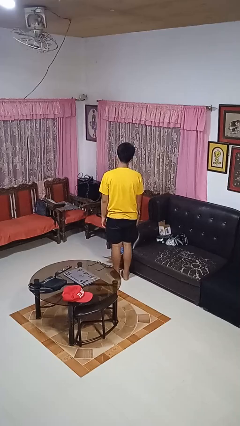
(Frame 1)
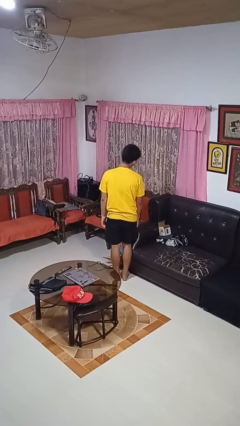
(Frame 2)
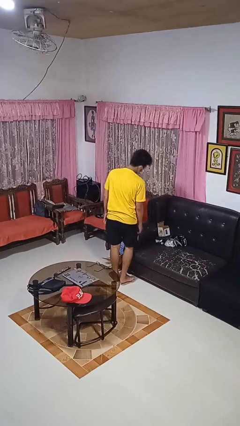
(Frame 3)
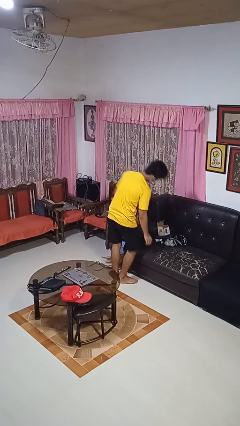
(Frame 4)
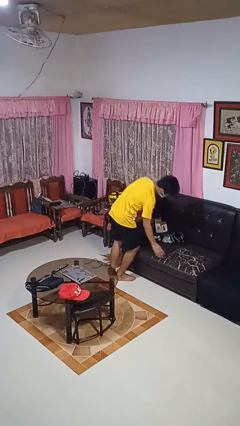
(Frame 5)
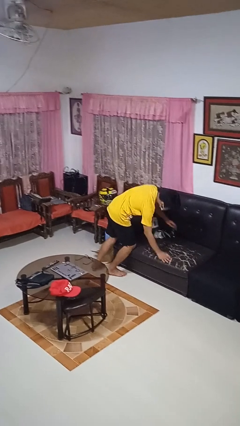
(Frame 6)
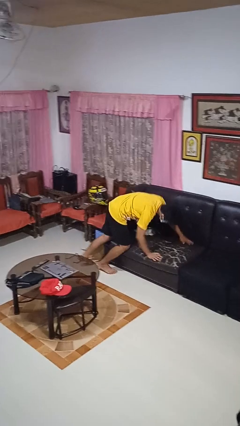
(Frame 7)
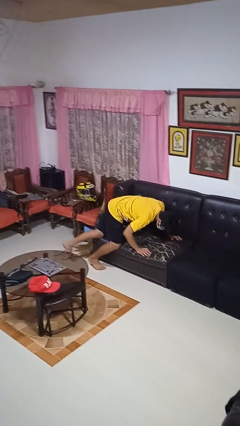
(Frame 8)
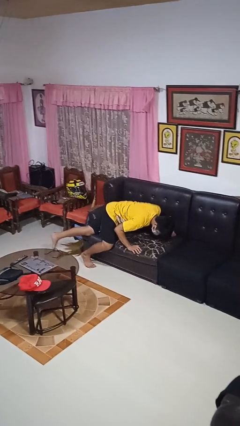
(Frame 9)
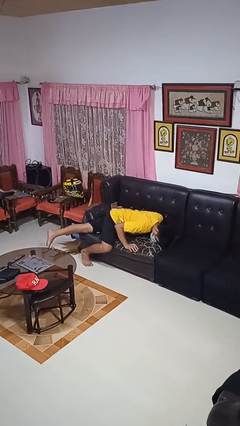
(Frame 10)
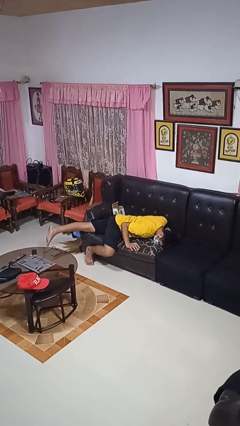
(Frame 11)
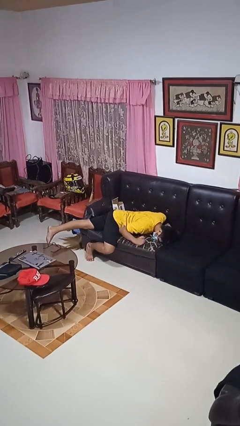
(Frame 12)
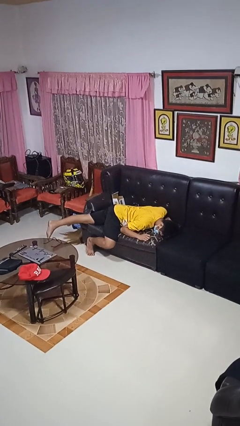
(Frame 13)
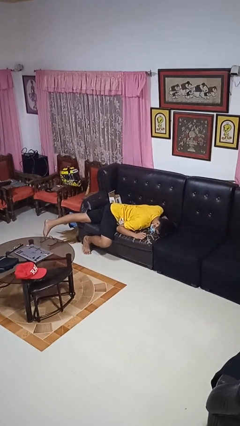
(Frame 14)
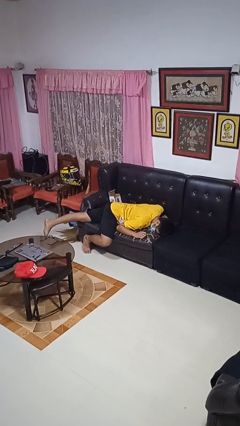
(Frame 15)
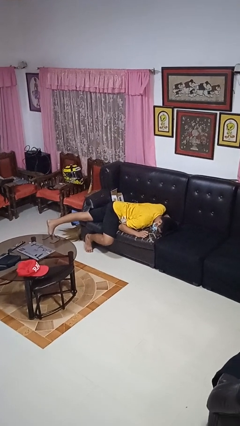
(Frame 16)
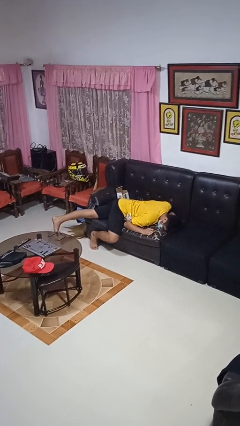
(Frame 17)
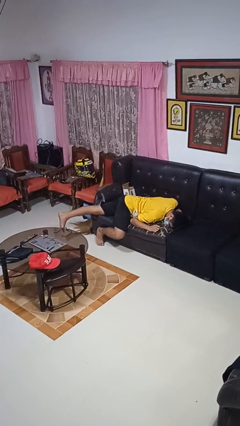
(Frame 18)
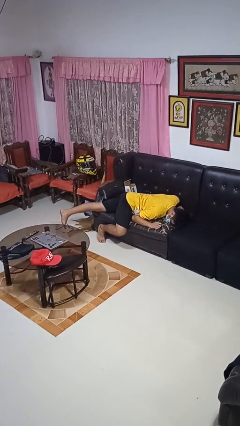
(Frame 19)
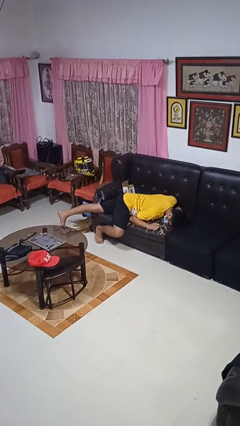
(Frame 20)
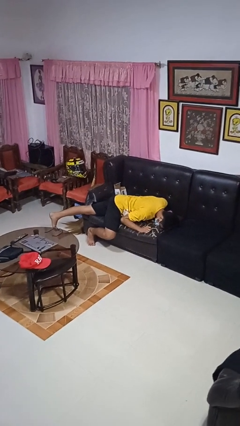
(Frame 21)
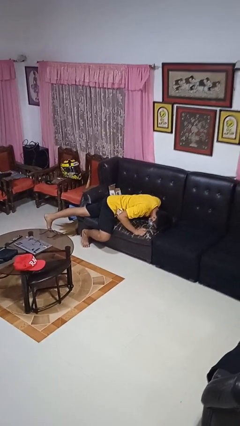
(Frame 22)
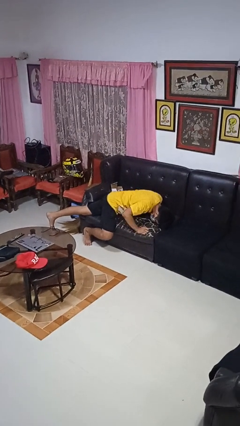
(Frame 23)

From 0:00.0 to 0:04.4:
person lies down on couch

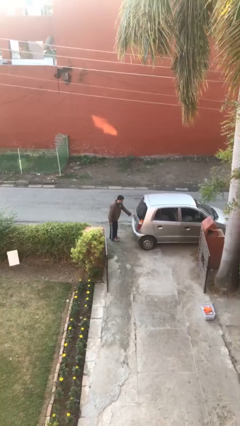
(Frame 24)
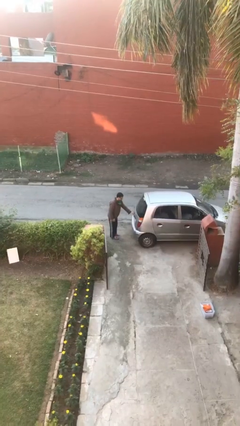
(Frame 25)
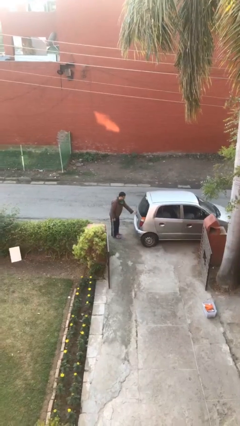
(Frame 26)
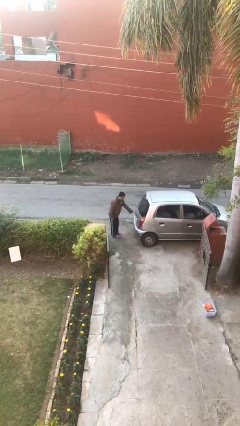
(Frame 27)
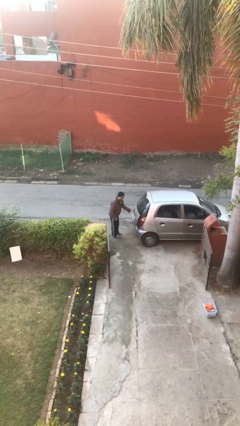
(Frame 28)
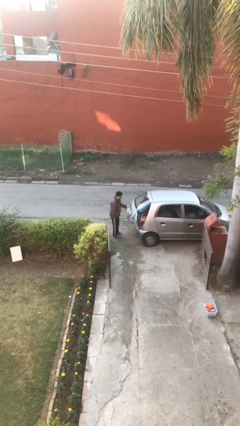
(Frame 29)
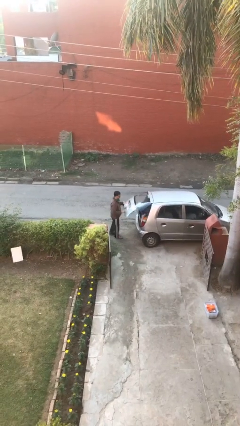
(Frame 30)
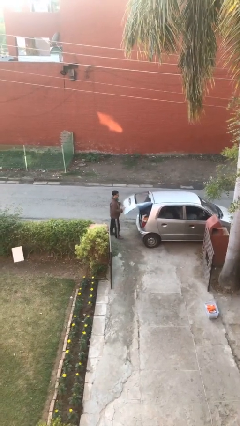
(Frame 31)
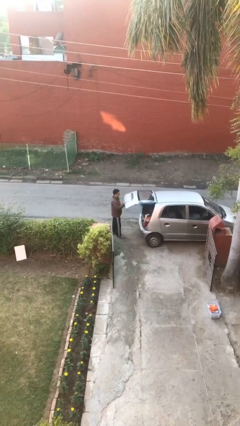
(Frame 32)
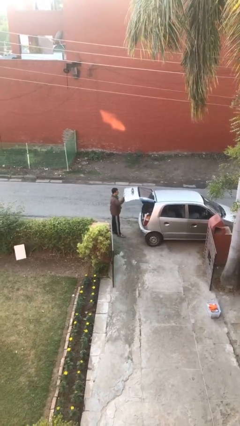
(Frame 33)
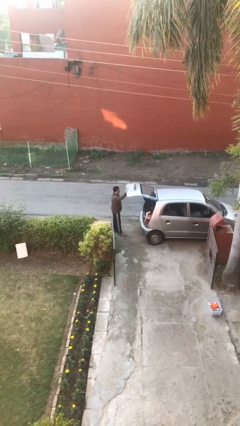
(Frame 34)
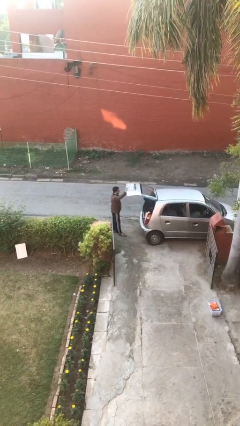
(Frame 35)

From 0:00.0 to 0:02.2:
person opens car trunk

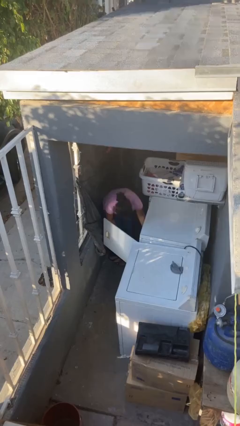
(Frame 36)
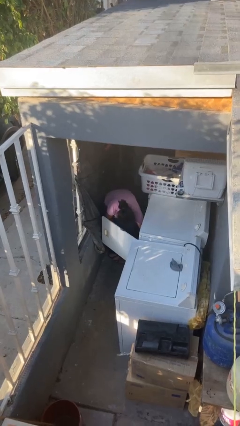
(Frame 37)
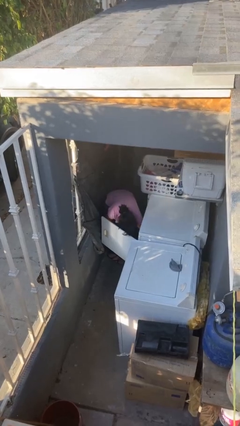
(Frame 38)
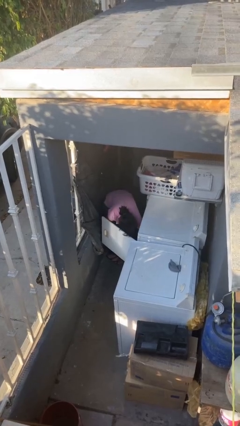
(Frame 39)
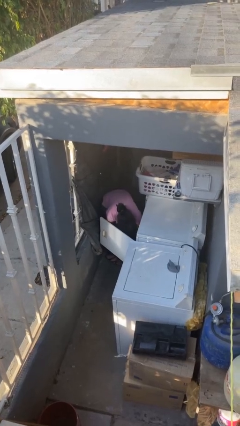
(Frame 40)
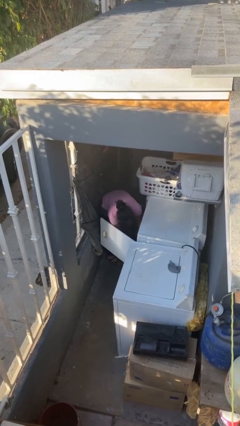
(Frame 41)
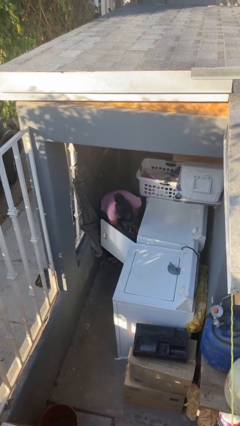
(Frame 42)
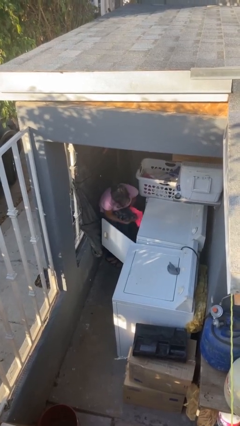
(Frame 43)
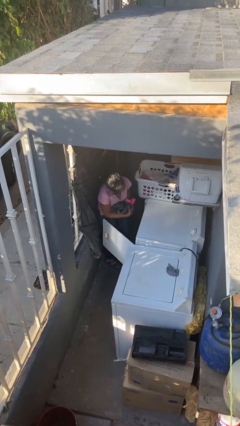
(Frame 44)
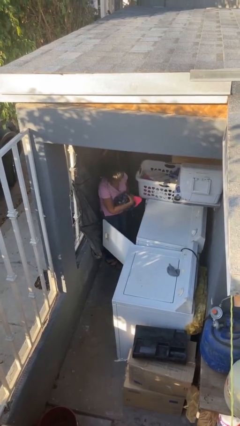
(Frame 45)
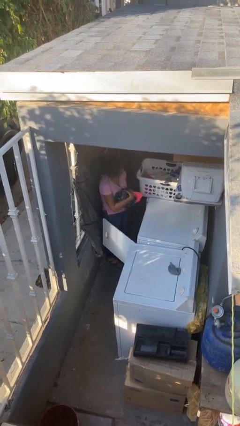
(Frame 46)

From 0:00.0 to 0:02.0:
person unloads dryer

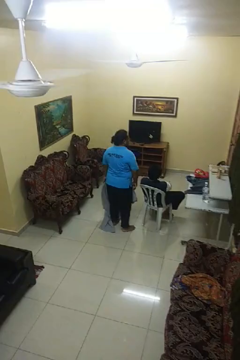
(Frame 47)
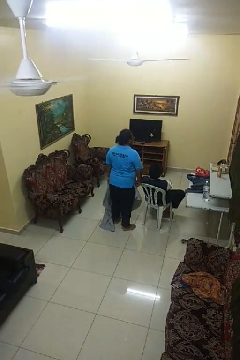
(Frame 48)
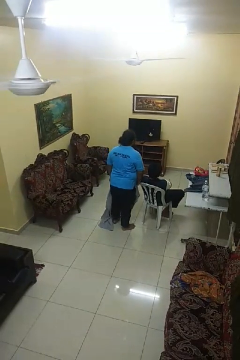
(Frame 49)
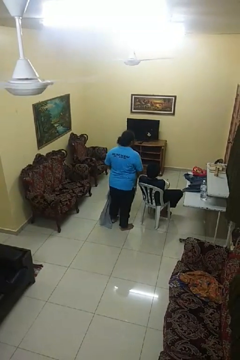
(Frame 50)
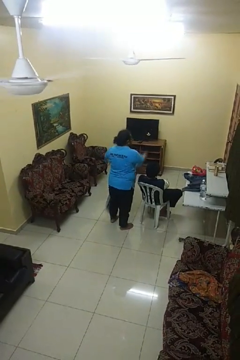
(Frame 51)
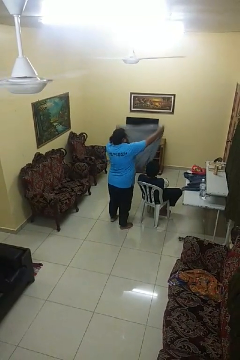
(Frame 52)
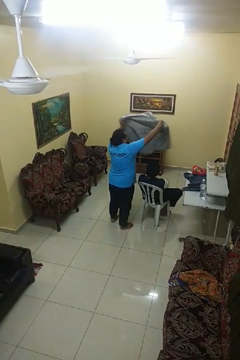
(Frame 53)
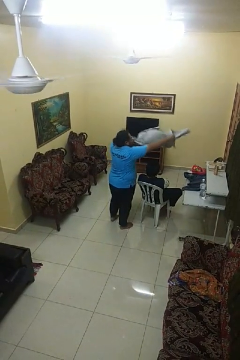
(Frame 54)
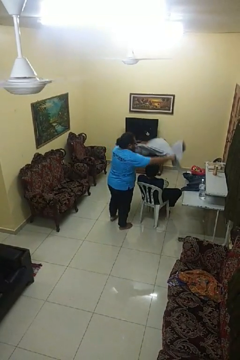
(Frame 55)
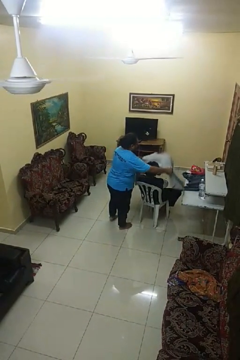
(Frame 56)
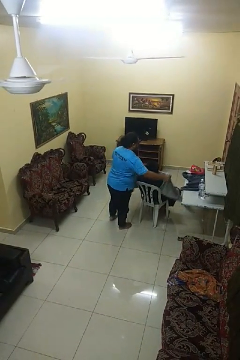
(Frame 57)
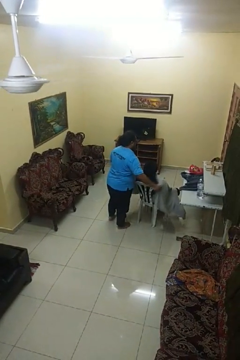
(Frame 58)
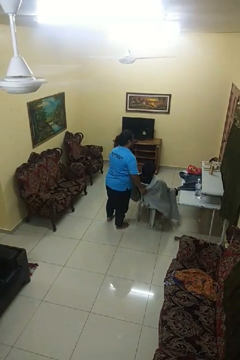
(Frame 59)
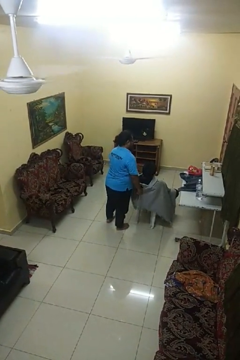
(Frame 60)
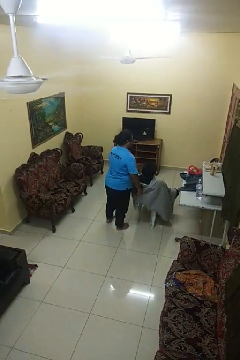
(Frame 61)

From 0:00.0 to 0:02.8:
person covers friend with blanket

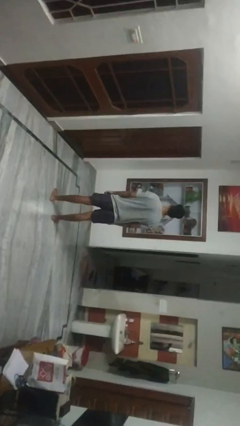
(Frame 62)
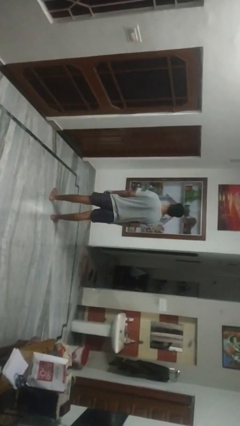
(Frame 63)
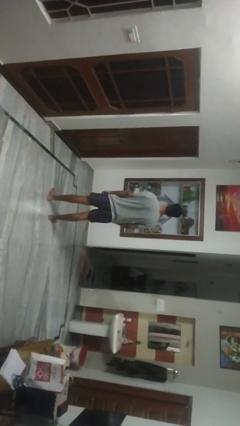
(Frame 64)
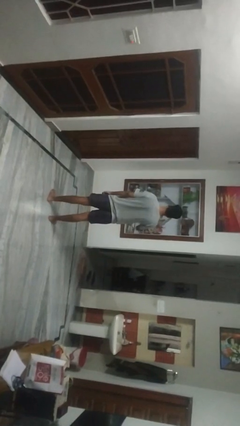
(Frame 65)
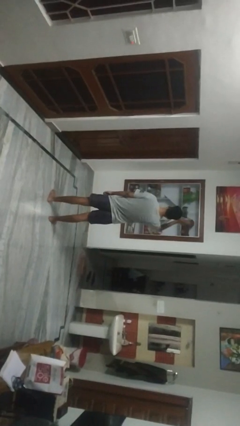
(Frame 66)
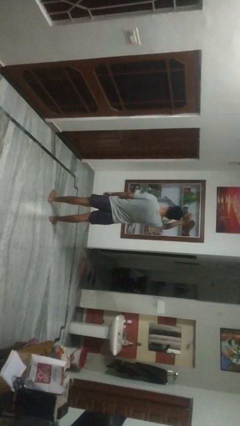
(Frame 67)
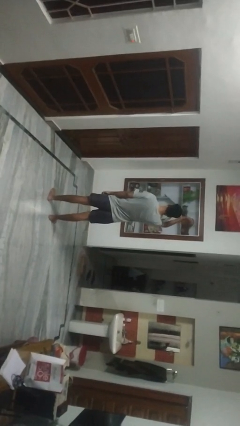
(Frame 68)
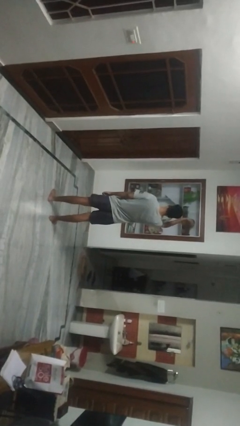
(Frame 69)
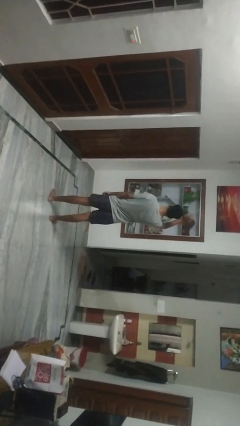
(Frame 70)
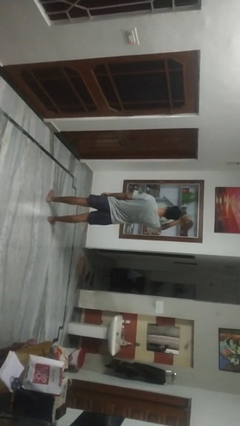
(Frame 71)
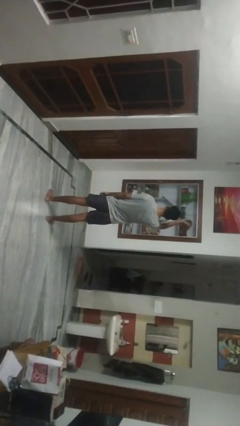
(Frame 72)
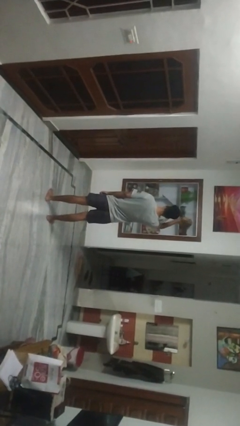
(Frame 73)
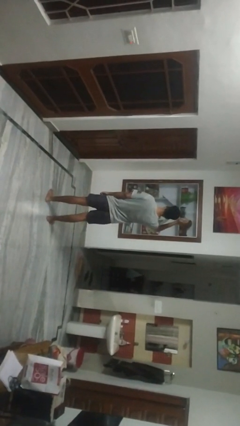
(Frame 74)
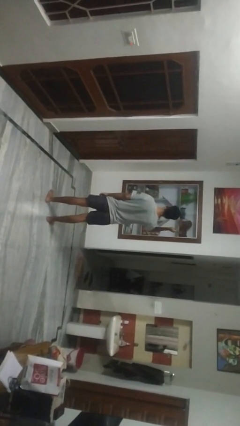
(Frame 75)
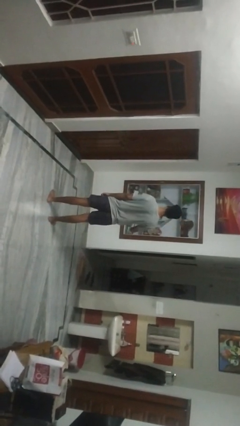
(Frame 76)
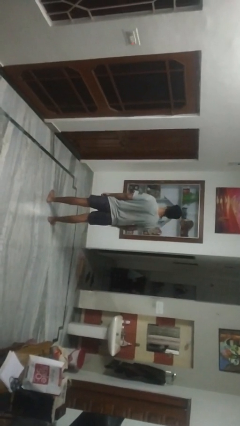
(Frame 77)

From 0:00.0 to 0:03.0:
person waves at person

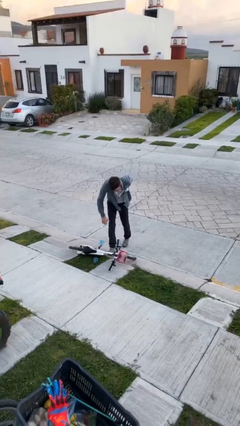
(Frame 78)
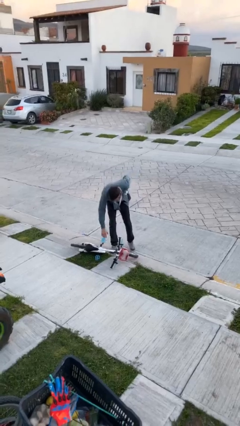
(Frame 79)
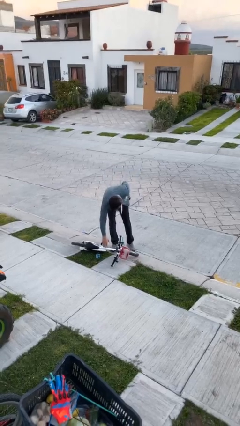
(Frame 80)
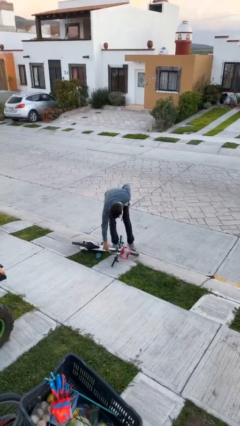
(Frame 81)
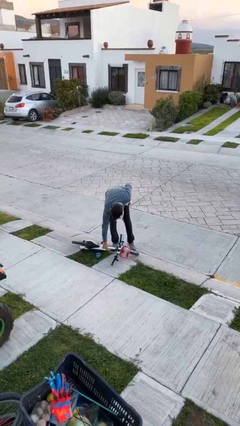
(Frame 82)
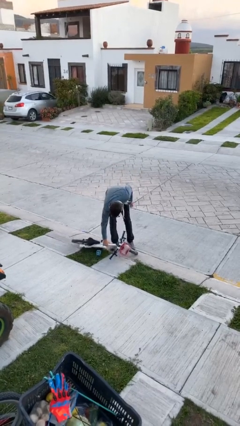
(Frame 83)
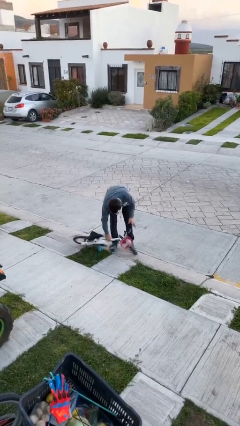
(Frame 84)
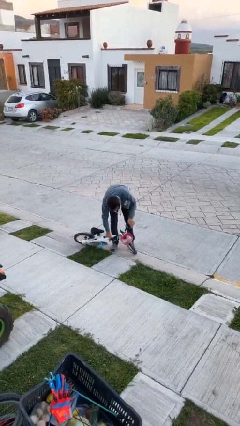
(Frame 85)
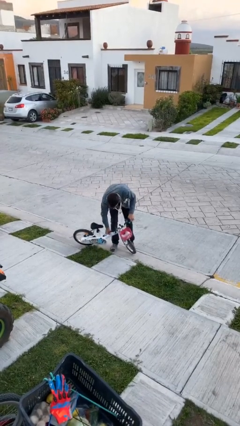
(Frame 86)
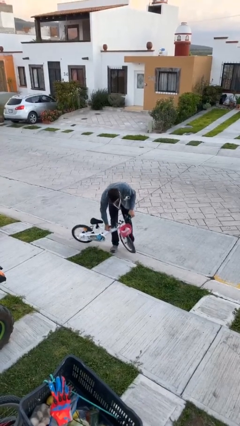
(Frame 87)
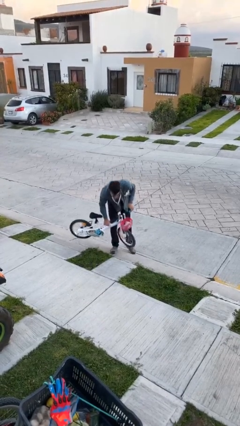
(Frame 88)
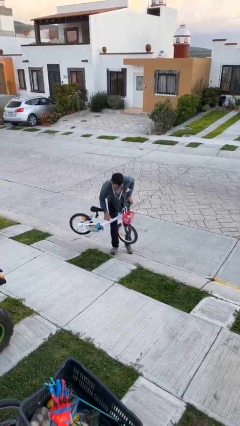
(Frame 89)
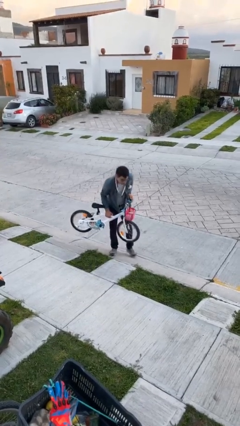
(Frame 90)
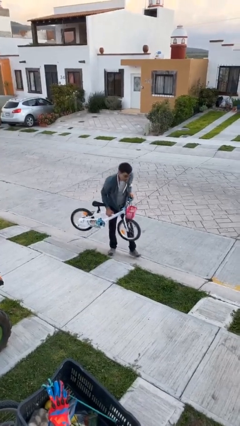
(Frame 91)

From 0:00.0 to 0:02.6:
person picks up object from floor

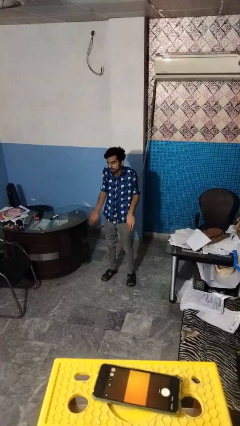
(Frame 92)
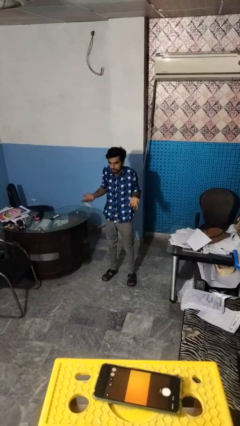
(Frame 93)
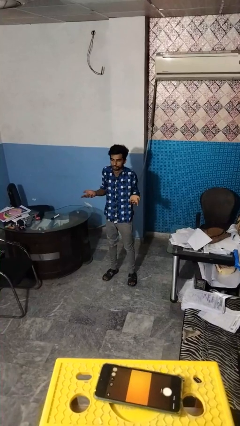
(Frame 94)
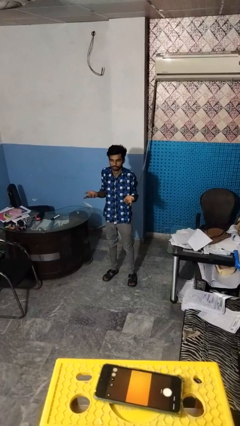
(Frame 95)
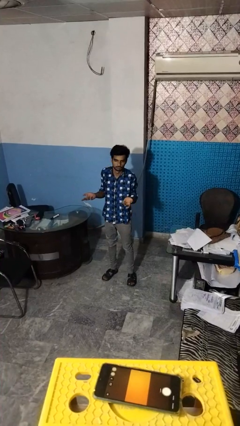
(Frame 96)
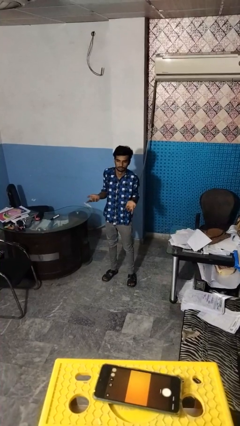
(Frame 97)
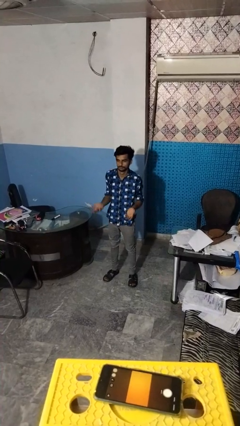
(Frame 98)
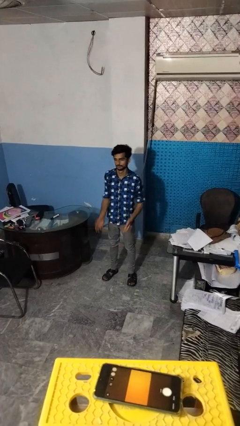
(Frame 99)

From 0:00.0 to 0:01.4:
person shrugs
